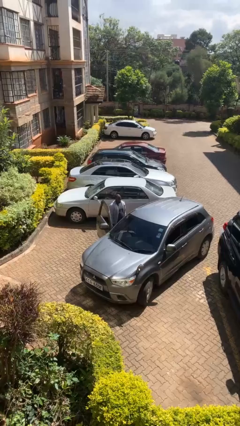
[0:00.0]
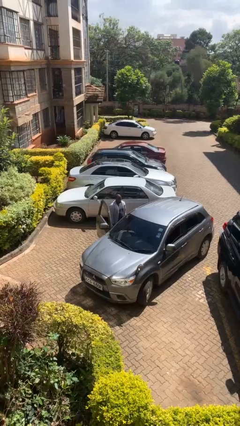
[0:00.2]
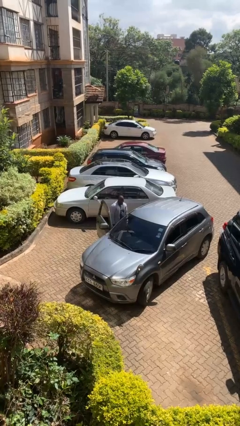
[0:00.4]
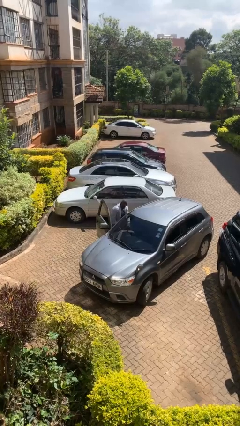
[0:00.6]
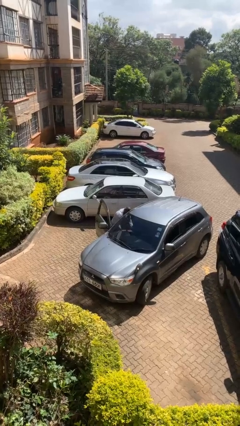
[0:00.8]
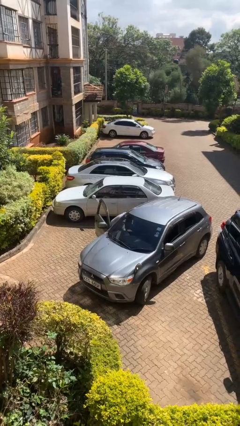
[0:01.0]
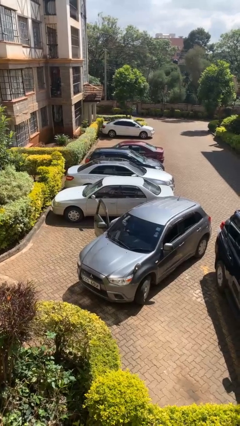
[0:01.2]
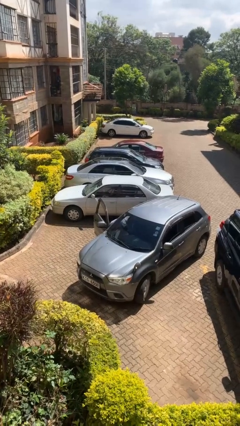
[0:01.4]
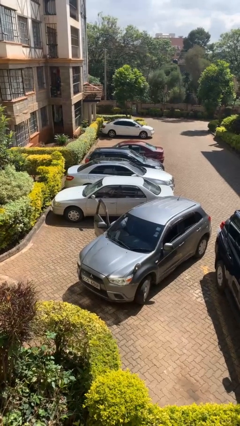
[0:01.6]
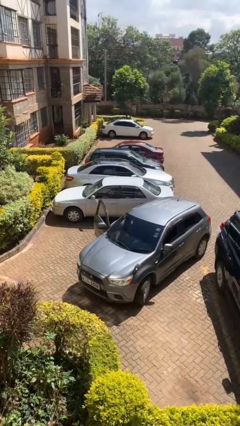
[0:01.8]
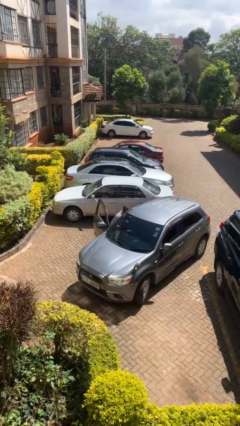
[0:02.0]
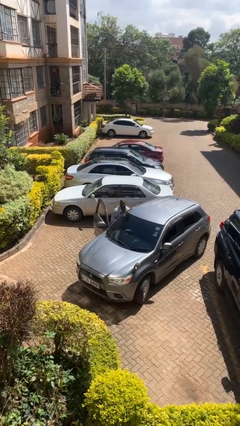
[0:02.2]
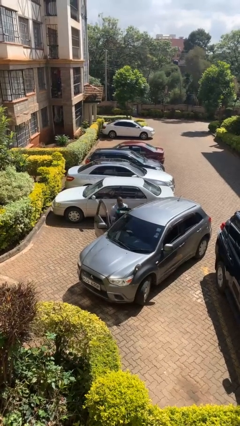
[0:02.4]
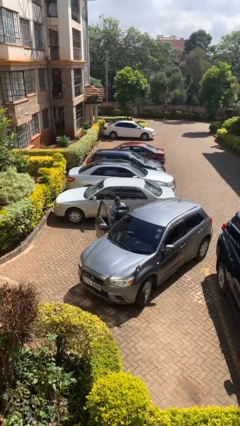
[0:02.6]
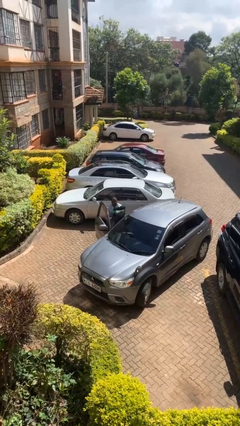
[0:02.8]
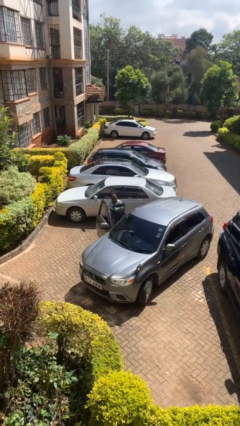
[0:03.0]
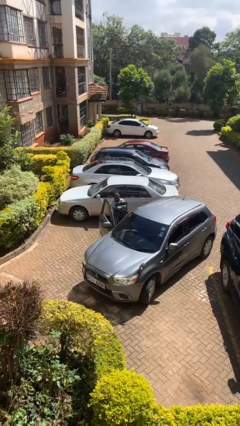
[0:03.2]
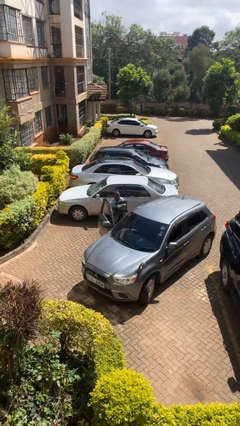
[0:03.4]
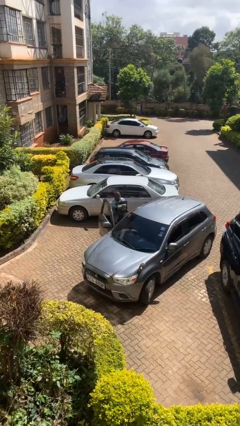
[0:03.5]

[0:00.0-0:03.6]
person unloads car

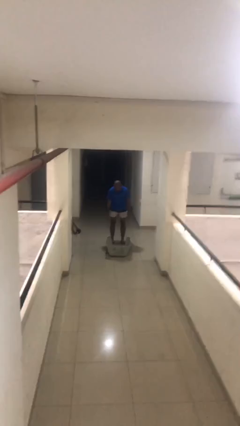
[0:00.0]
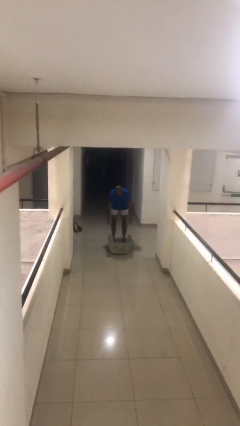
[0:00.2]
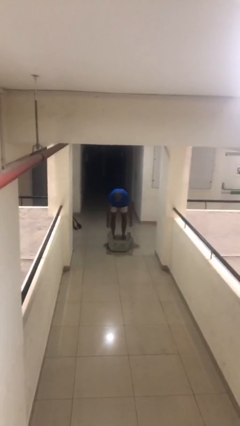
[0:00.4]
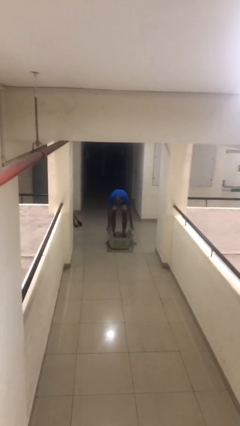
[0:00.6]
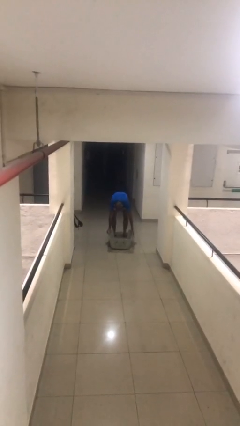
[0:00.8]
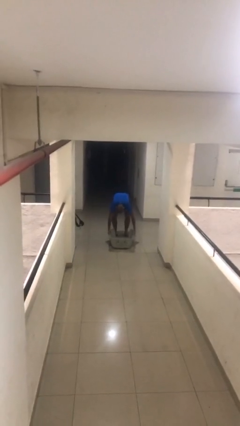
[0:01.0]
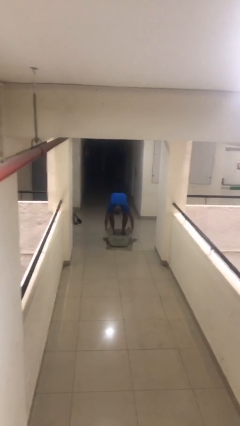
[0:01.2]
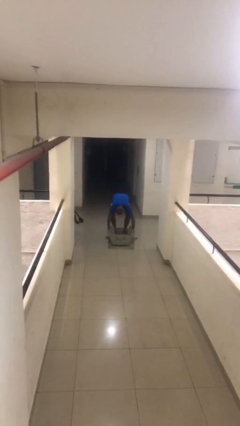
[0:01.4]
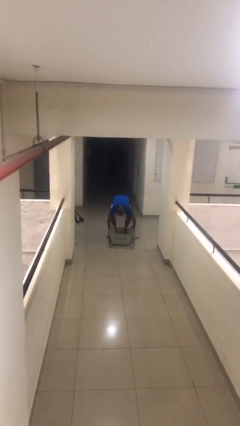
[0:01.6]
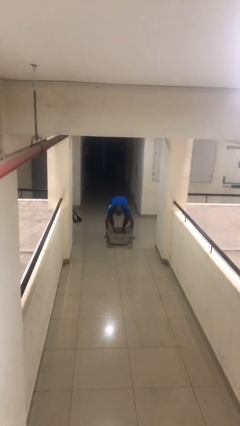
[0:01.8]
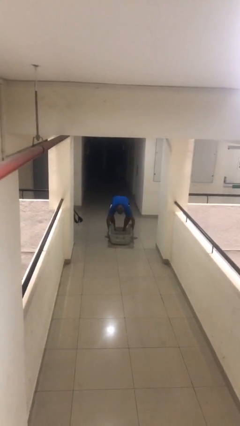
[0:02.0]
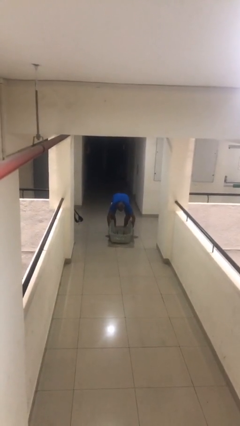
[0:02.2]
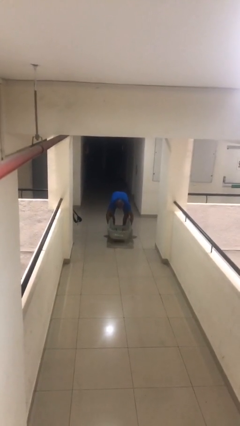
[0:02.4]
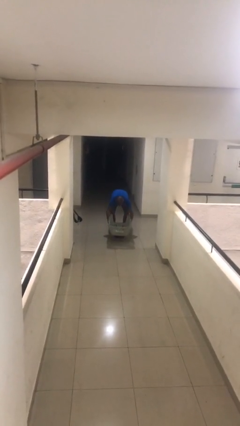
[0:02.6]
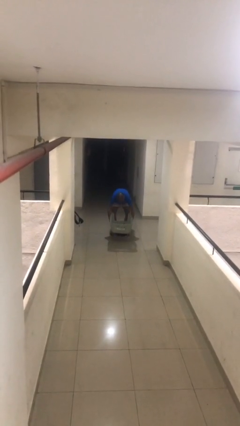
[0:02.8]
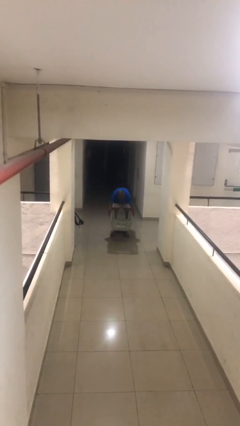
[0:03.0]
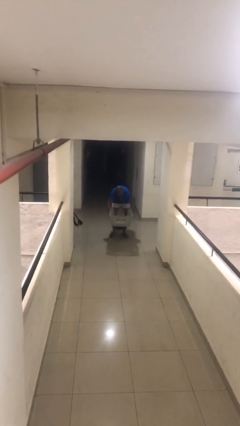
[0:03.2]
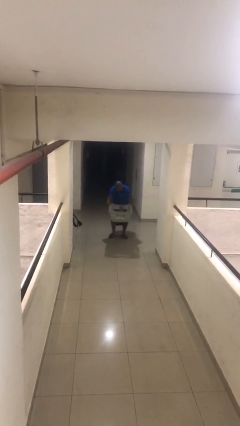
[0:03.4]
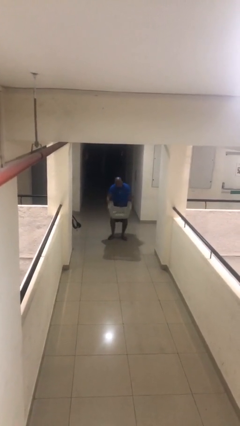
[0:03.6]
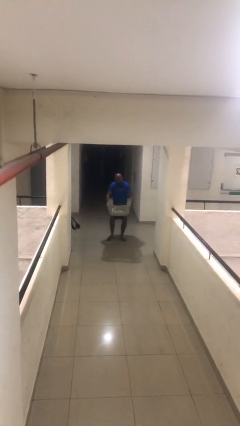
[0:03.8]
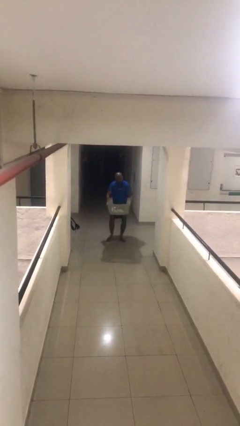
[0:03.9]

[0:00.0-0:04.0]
person picks up object from floor

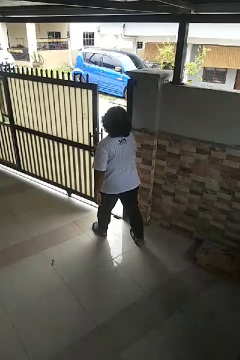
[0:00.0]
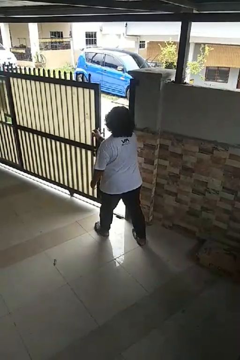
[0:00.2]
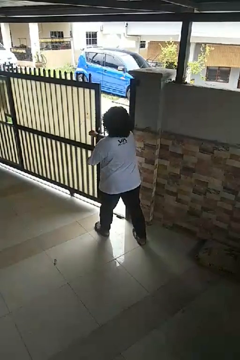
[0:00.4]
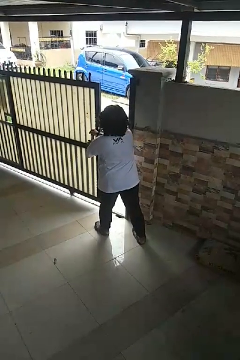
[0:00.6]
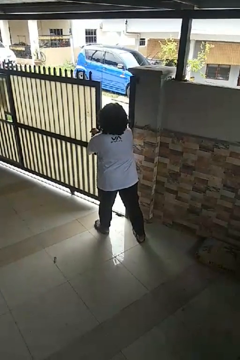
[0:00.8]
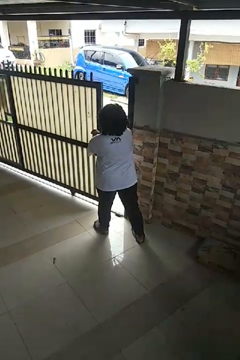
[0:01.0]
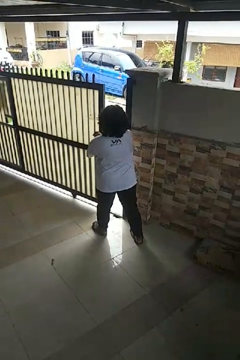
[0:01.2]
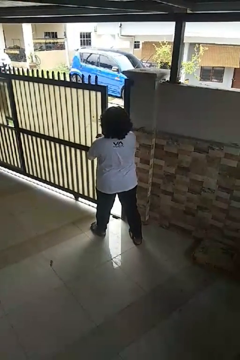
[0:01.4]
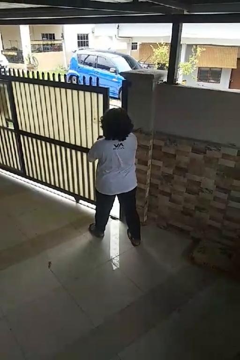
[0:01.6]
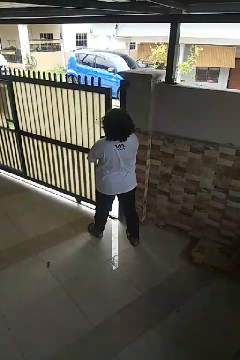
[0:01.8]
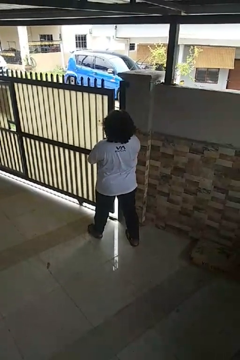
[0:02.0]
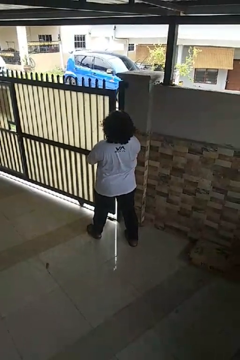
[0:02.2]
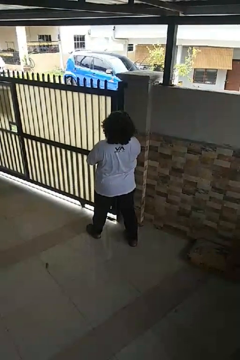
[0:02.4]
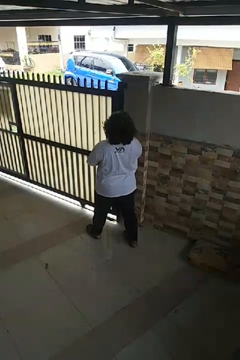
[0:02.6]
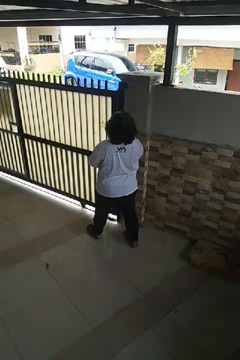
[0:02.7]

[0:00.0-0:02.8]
person closes sliding door

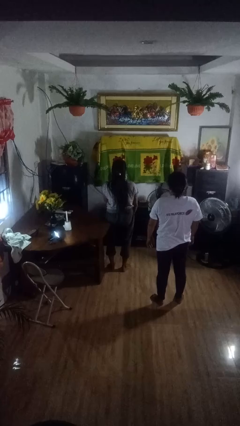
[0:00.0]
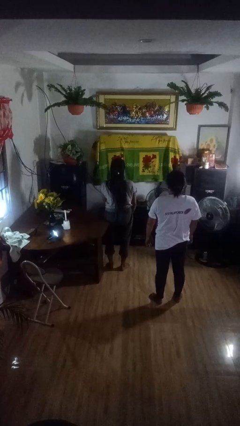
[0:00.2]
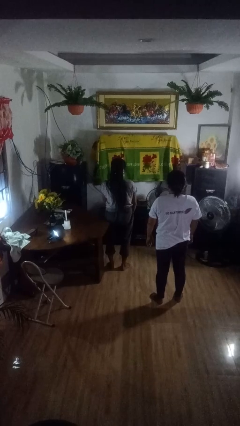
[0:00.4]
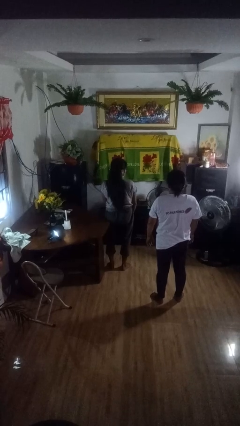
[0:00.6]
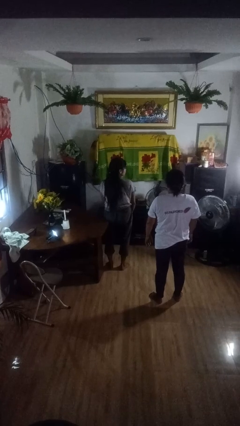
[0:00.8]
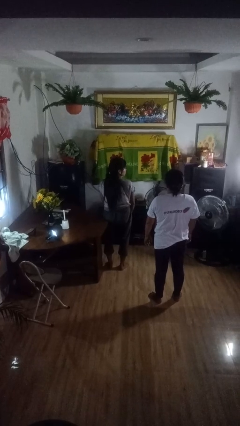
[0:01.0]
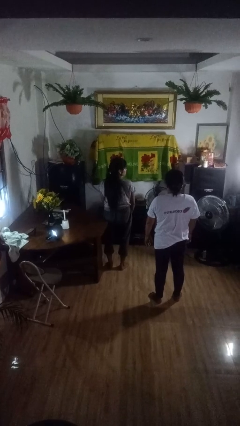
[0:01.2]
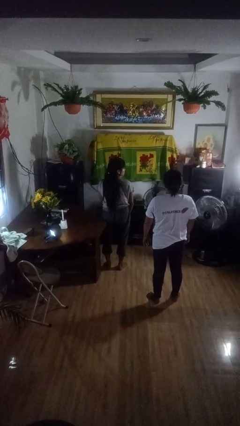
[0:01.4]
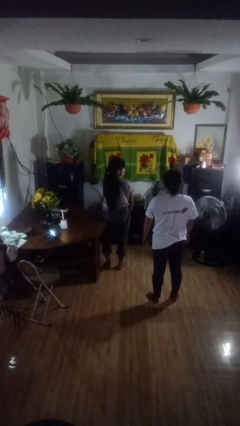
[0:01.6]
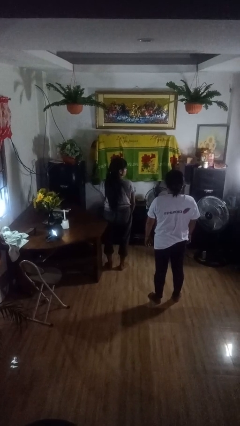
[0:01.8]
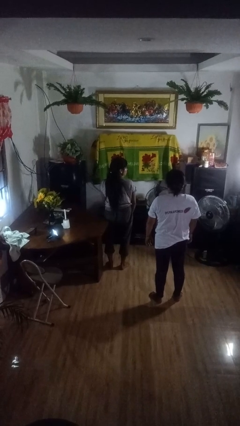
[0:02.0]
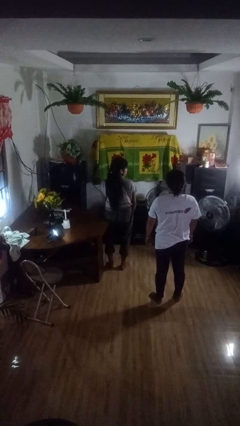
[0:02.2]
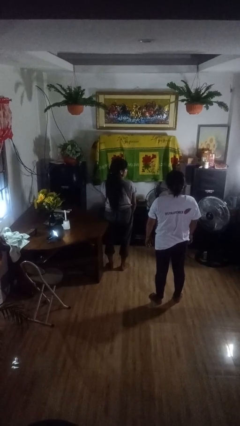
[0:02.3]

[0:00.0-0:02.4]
person looks over shoulder

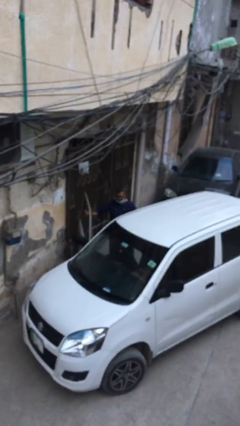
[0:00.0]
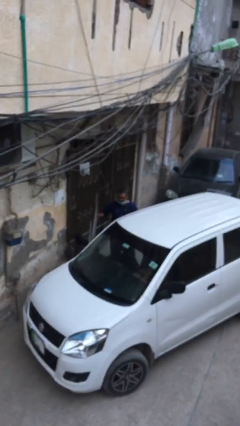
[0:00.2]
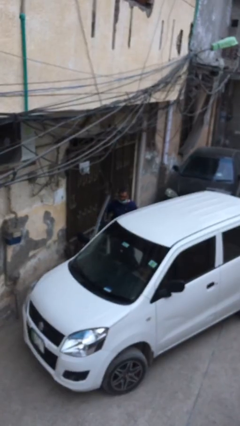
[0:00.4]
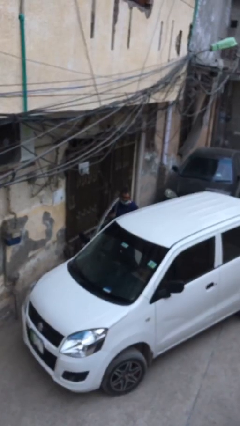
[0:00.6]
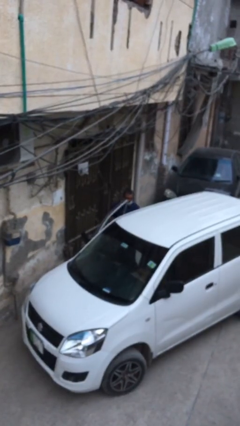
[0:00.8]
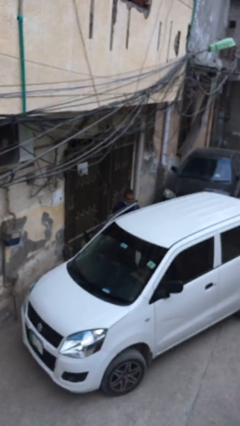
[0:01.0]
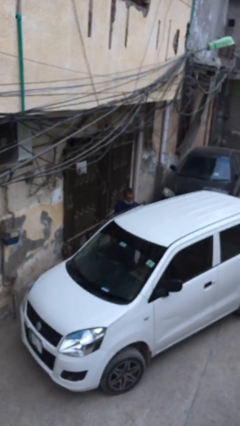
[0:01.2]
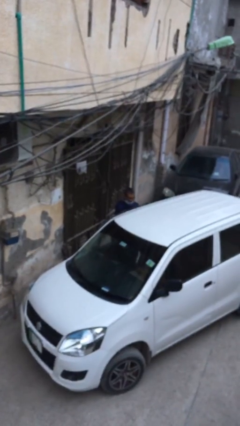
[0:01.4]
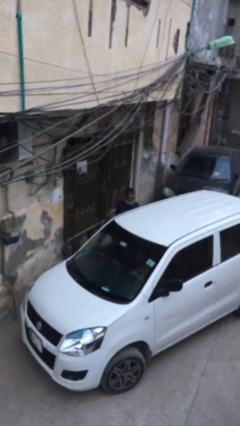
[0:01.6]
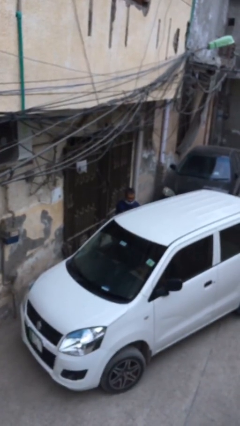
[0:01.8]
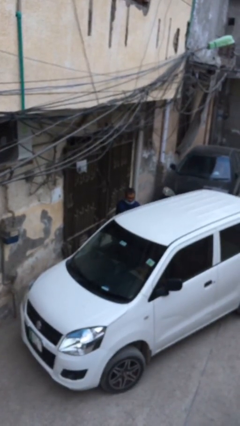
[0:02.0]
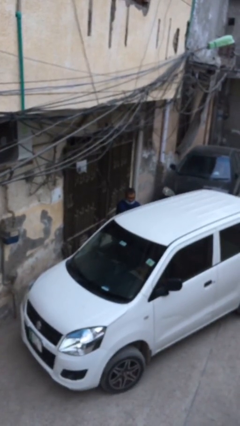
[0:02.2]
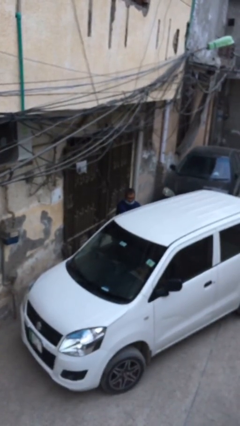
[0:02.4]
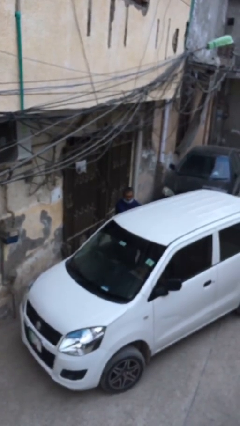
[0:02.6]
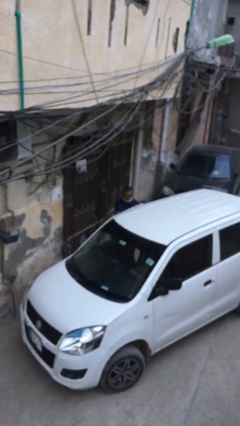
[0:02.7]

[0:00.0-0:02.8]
person closes car door

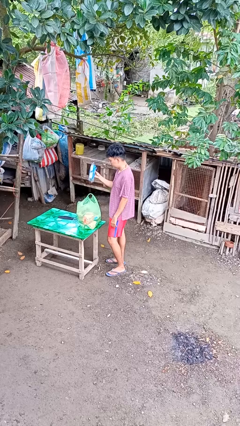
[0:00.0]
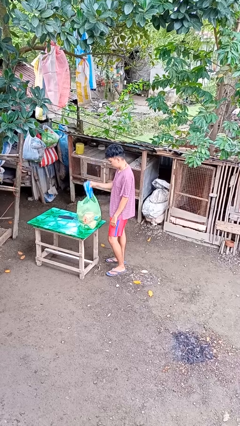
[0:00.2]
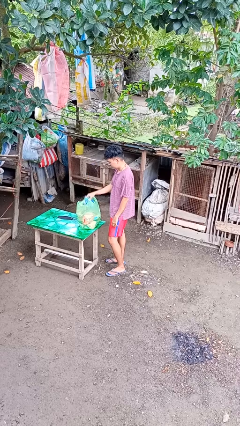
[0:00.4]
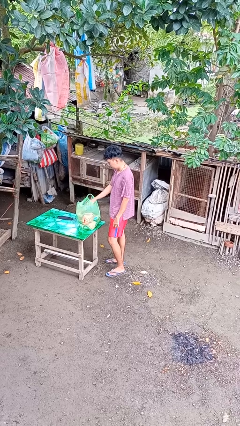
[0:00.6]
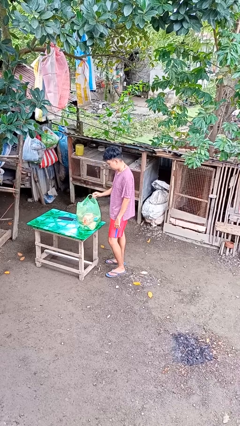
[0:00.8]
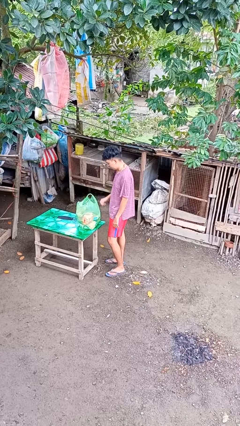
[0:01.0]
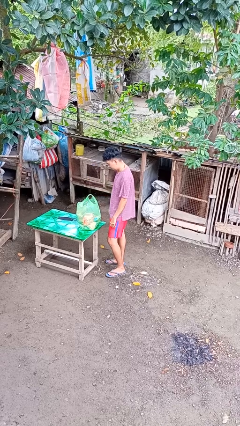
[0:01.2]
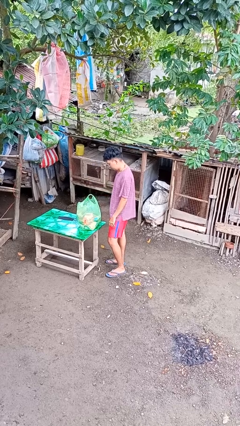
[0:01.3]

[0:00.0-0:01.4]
person puts object into bag

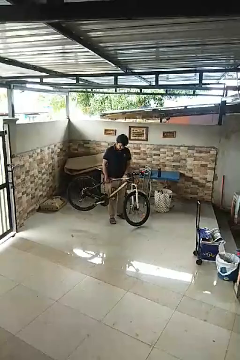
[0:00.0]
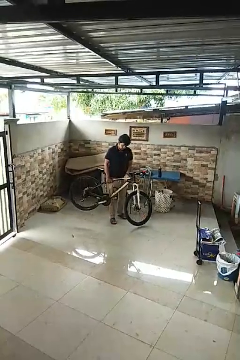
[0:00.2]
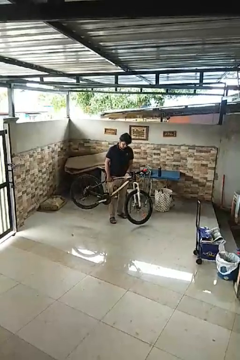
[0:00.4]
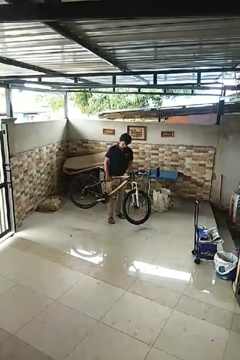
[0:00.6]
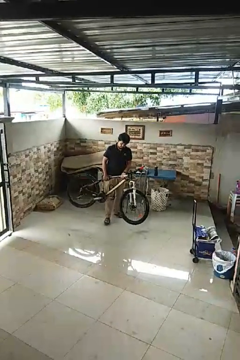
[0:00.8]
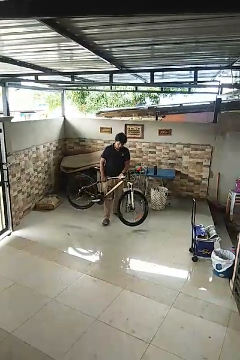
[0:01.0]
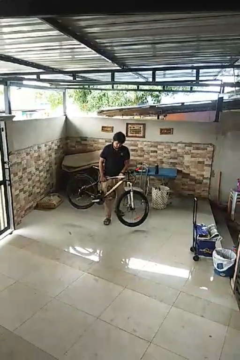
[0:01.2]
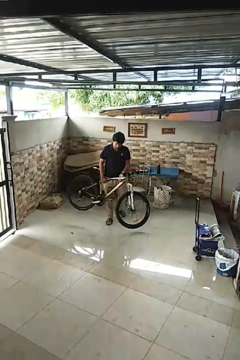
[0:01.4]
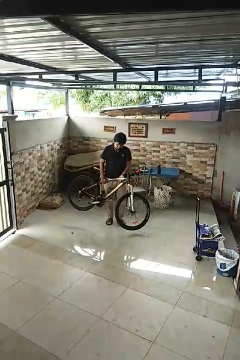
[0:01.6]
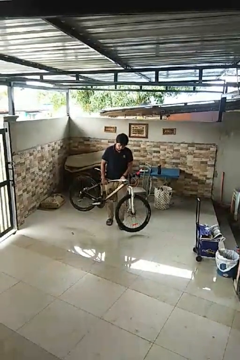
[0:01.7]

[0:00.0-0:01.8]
person carries bicycle
